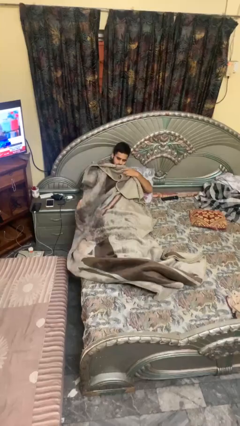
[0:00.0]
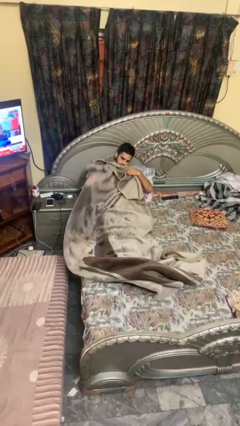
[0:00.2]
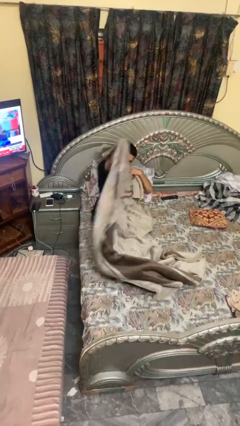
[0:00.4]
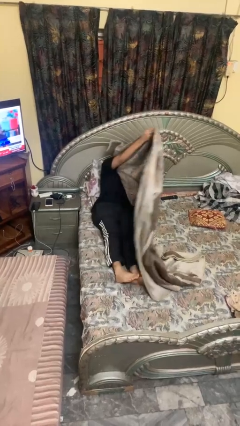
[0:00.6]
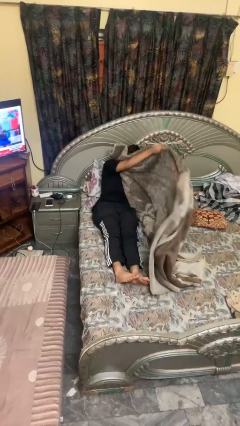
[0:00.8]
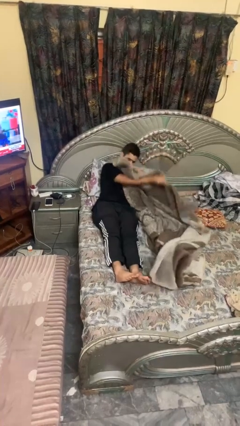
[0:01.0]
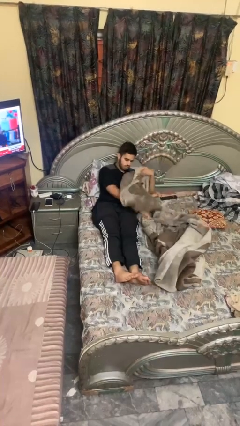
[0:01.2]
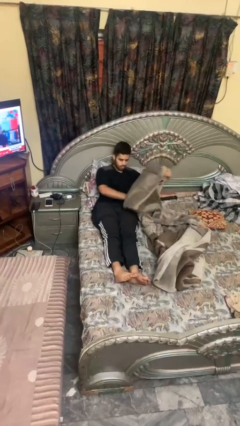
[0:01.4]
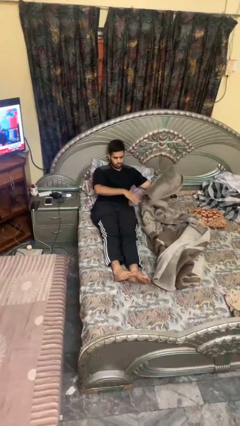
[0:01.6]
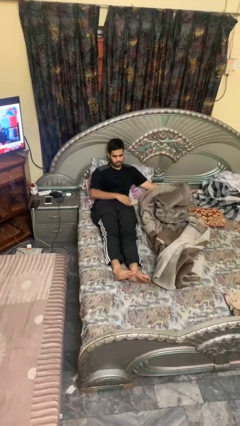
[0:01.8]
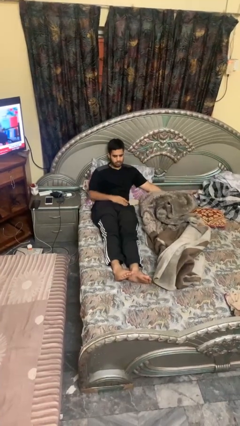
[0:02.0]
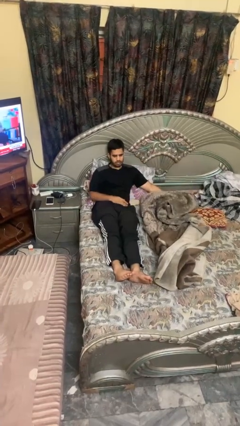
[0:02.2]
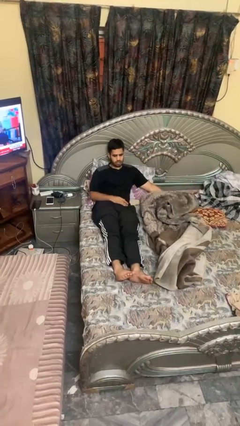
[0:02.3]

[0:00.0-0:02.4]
person uncovers with blanket

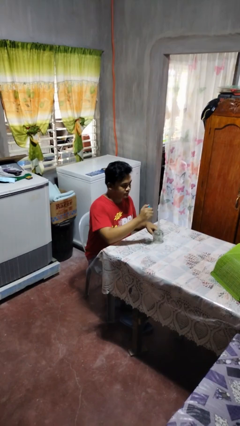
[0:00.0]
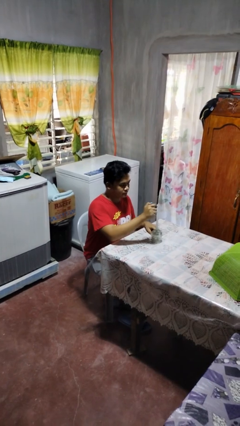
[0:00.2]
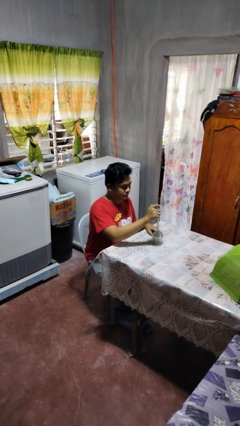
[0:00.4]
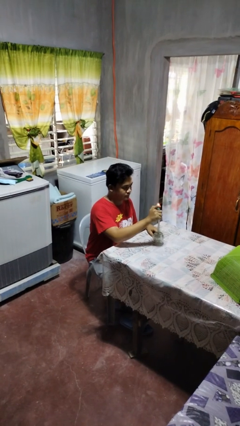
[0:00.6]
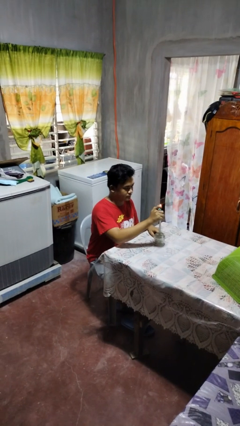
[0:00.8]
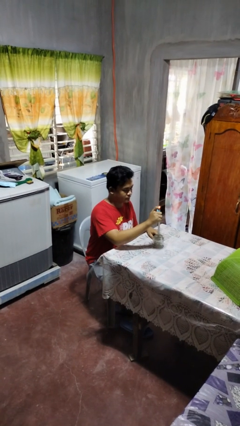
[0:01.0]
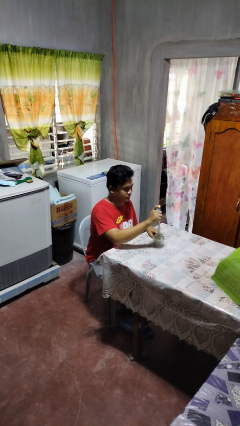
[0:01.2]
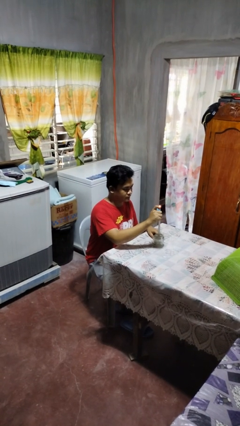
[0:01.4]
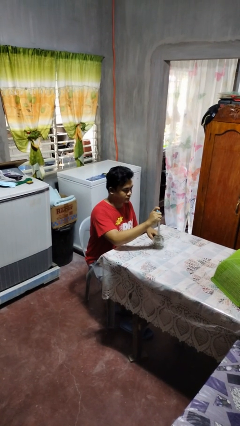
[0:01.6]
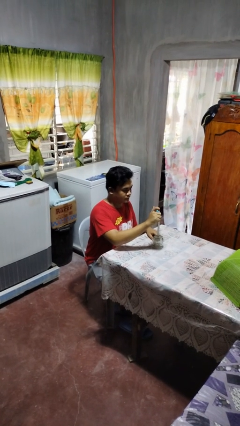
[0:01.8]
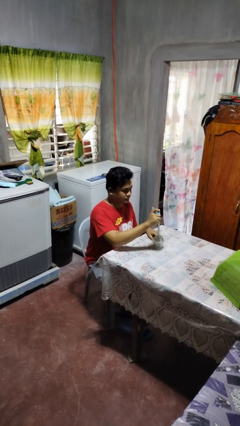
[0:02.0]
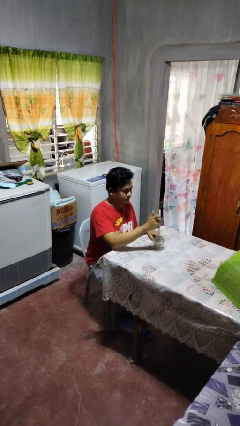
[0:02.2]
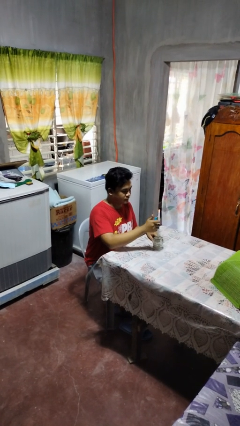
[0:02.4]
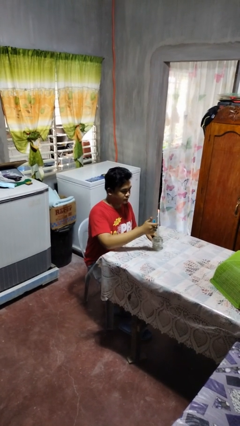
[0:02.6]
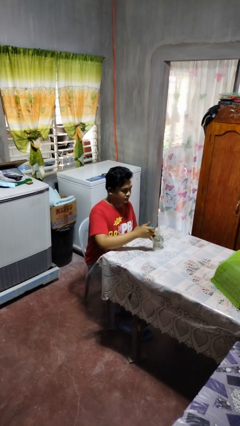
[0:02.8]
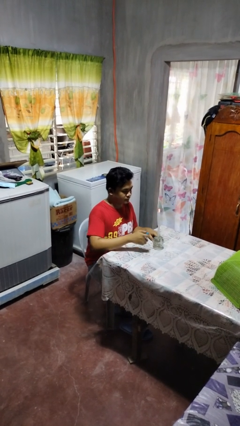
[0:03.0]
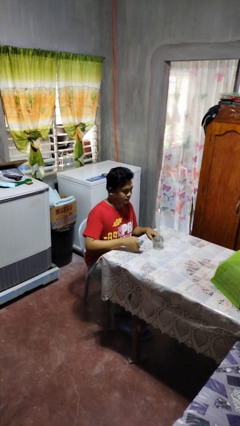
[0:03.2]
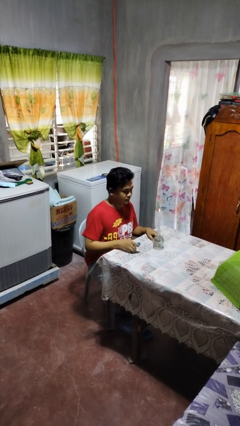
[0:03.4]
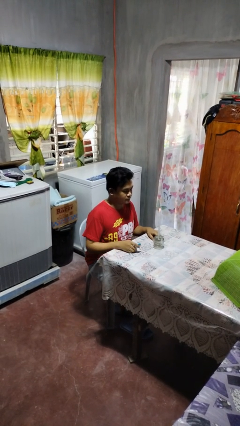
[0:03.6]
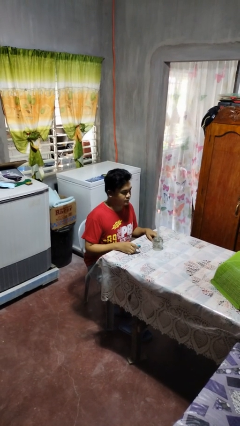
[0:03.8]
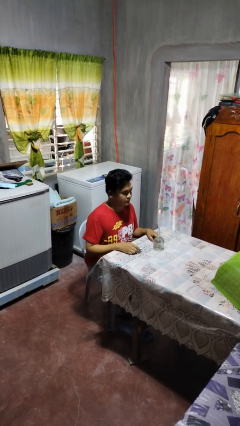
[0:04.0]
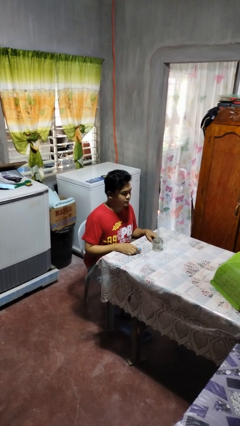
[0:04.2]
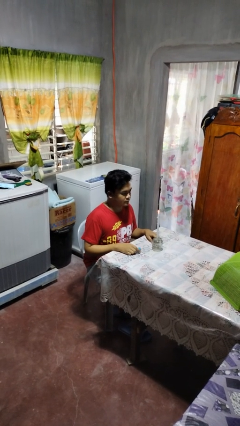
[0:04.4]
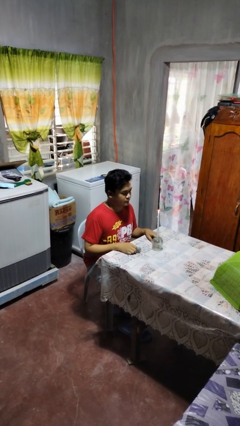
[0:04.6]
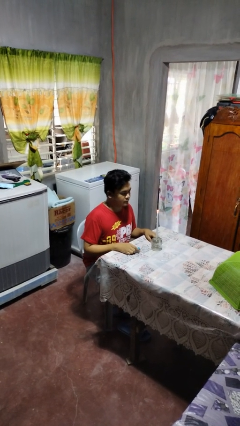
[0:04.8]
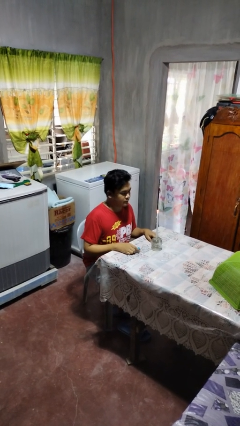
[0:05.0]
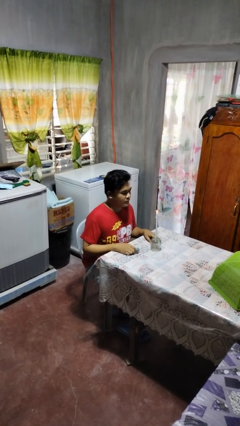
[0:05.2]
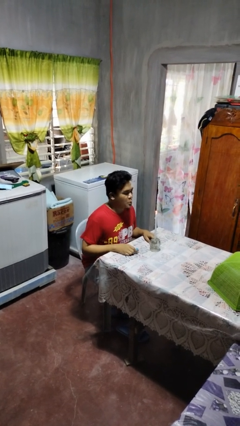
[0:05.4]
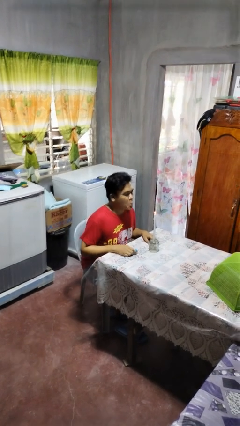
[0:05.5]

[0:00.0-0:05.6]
person lights candle

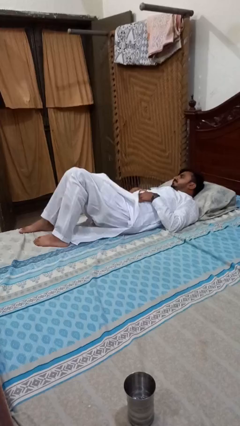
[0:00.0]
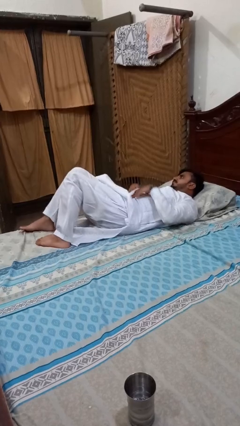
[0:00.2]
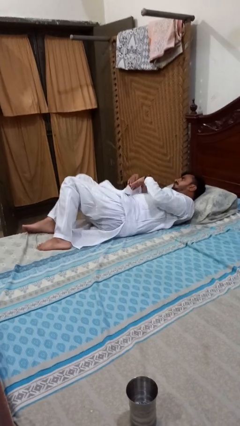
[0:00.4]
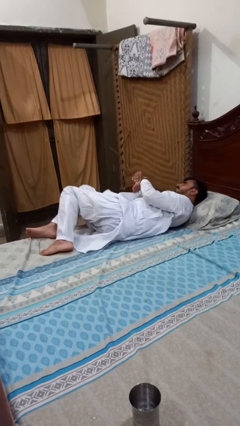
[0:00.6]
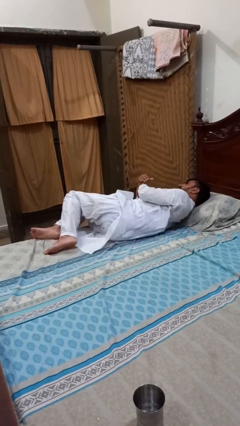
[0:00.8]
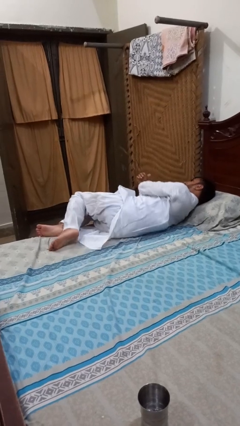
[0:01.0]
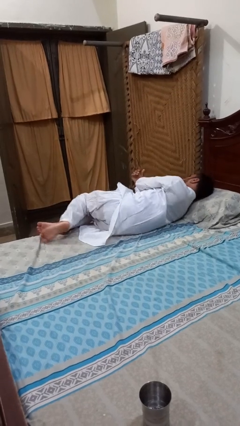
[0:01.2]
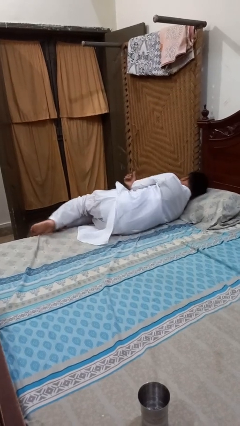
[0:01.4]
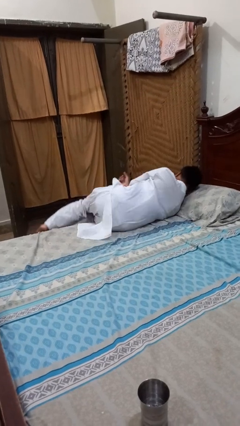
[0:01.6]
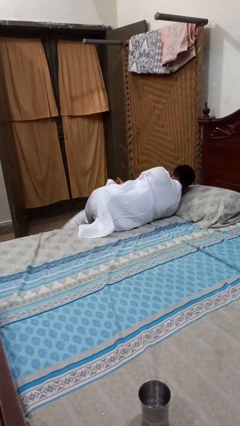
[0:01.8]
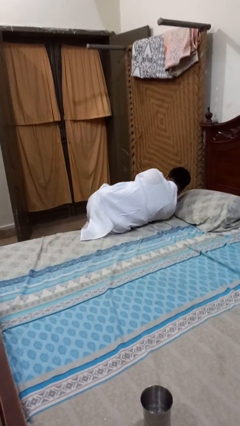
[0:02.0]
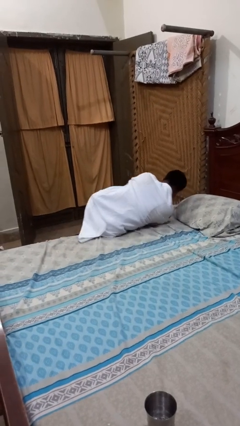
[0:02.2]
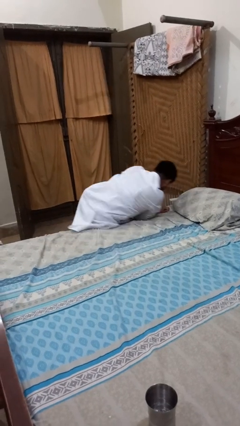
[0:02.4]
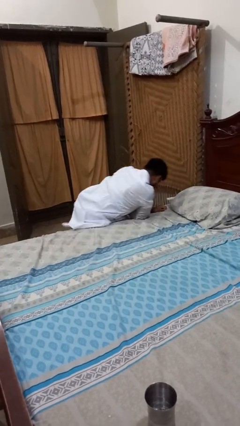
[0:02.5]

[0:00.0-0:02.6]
person falls from bed

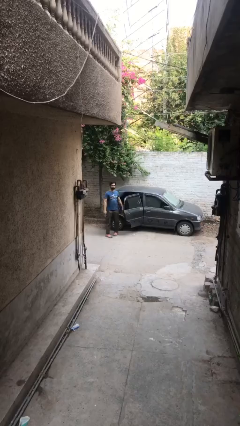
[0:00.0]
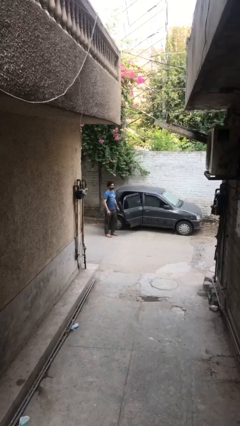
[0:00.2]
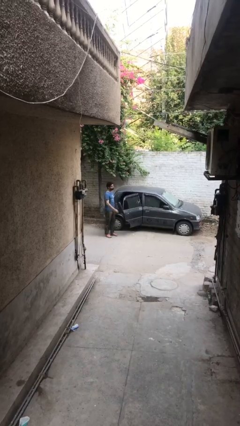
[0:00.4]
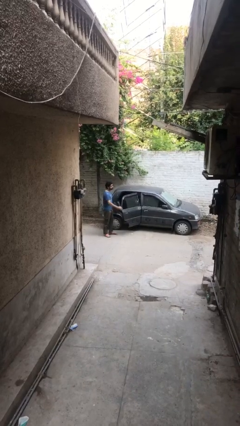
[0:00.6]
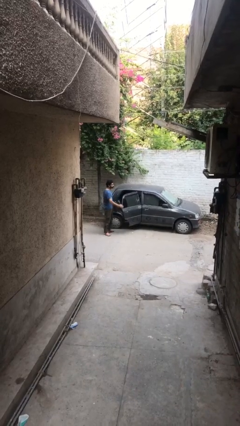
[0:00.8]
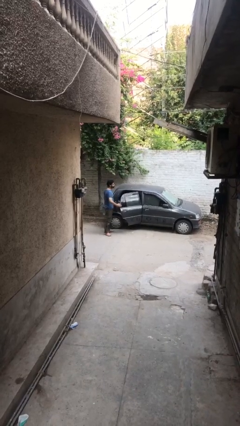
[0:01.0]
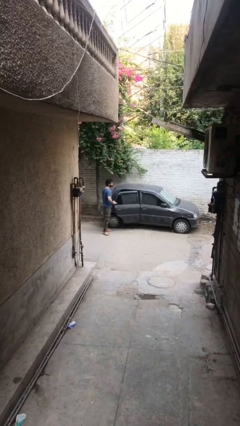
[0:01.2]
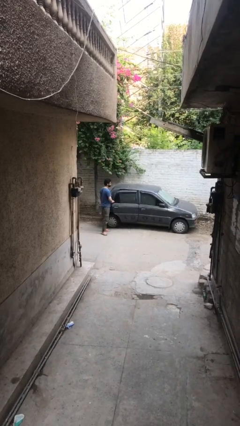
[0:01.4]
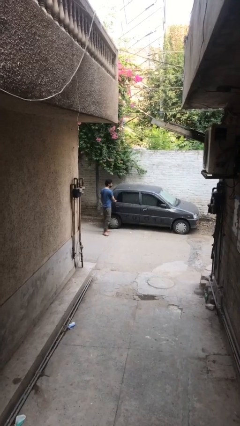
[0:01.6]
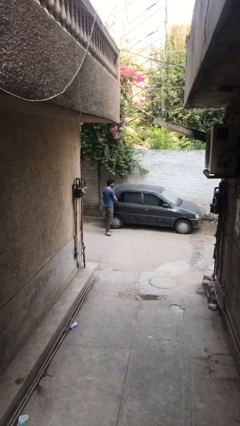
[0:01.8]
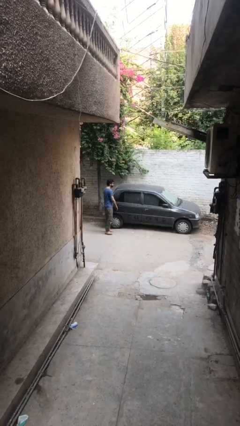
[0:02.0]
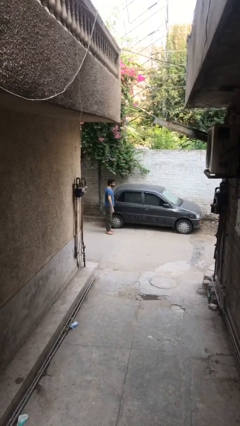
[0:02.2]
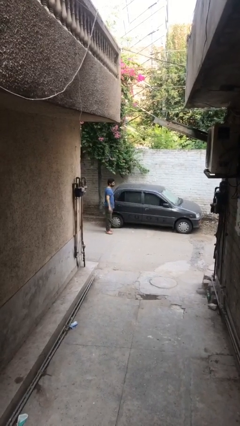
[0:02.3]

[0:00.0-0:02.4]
person closes car door

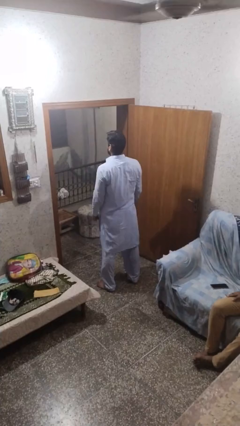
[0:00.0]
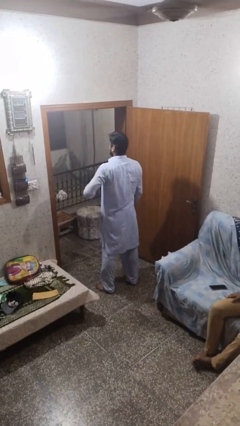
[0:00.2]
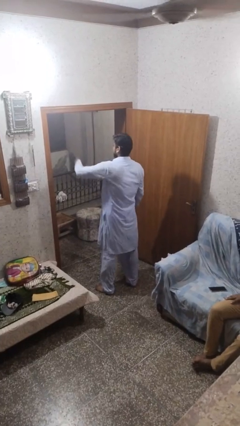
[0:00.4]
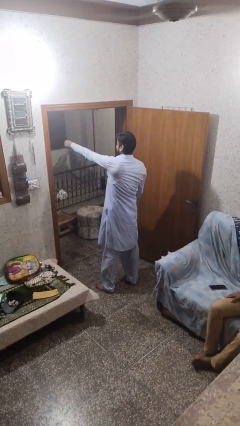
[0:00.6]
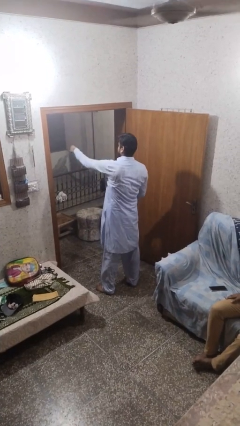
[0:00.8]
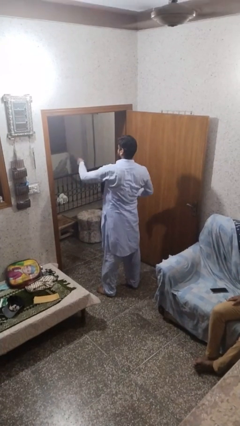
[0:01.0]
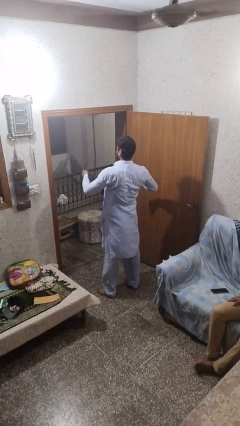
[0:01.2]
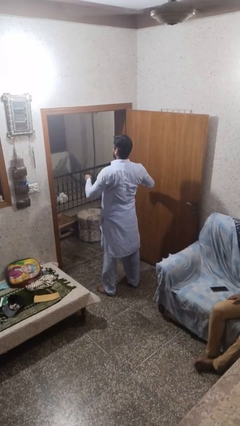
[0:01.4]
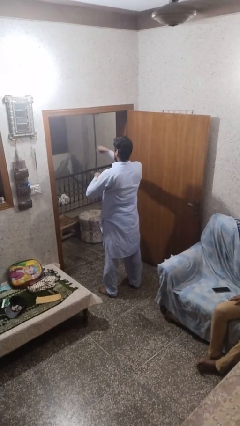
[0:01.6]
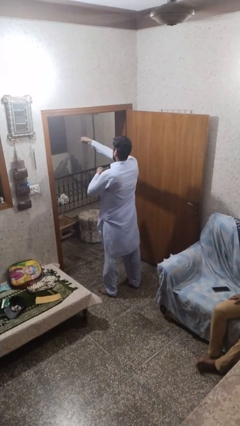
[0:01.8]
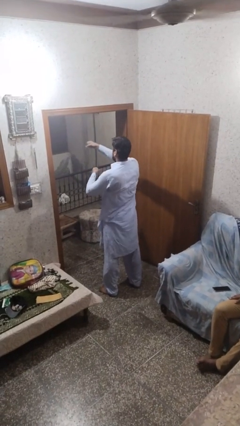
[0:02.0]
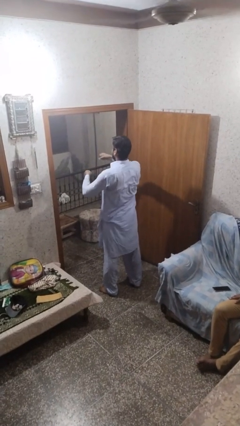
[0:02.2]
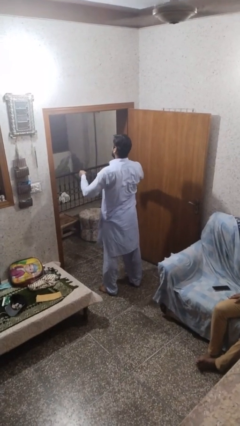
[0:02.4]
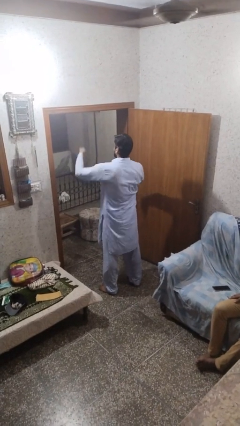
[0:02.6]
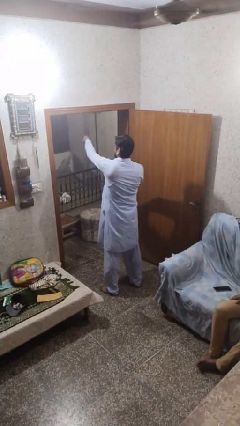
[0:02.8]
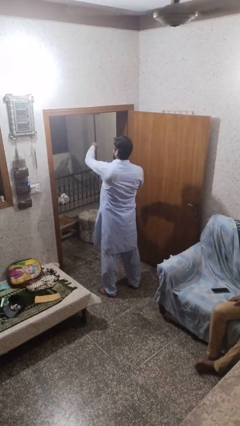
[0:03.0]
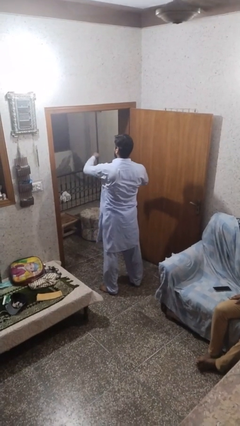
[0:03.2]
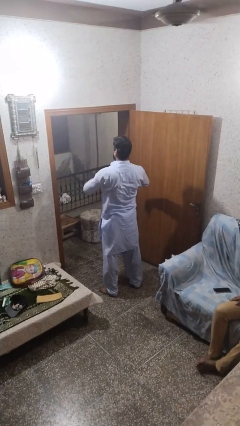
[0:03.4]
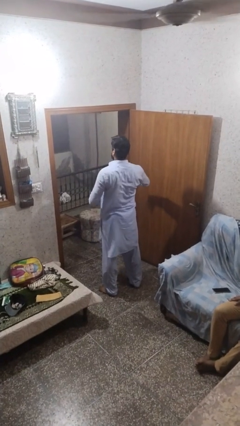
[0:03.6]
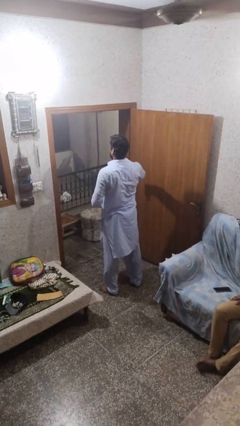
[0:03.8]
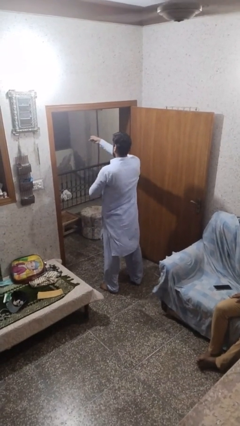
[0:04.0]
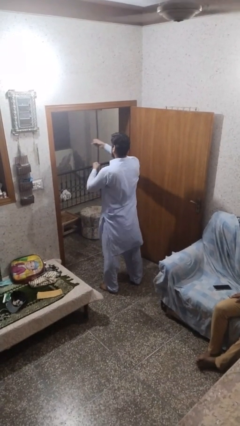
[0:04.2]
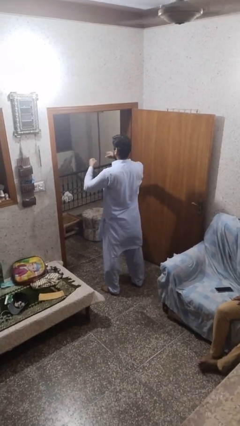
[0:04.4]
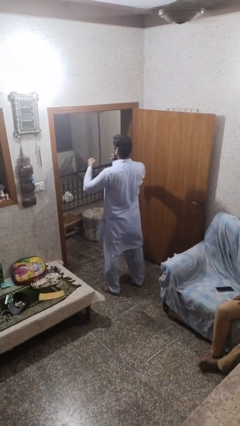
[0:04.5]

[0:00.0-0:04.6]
person punches
